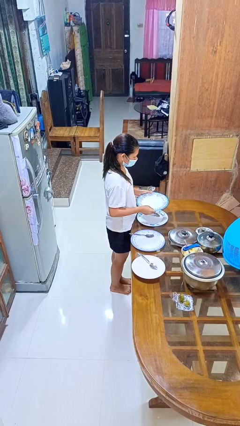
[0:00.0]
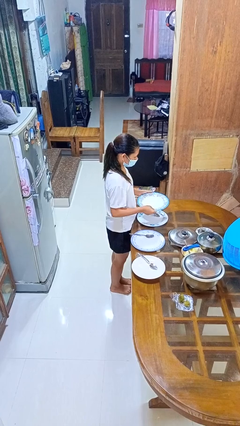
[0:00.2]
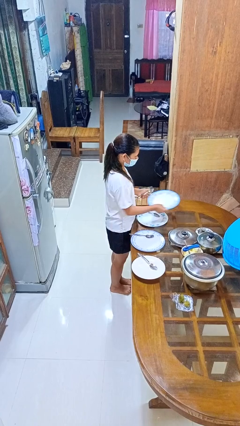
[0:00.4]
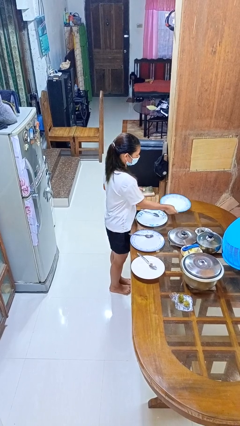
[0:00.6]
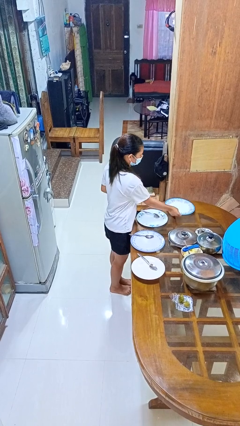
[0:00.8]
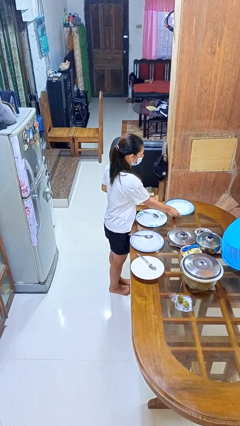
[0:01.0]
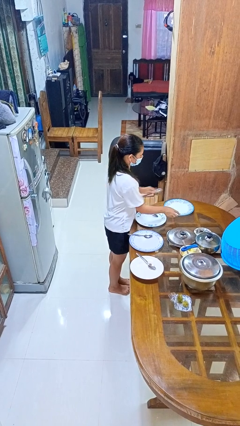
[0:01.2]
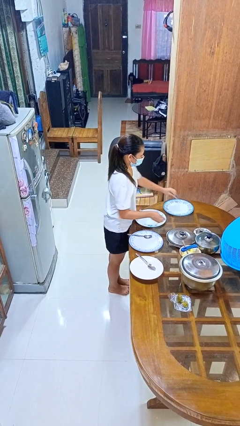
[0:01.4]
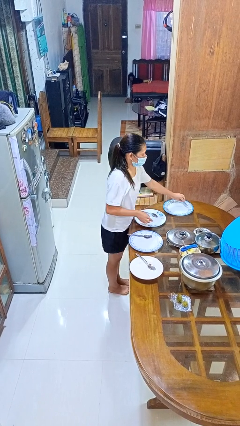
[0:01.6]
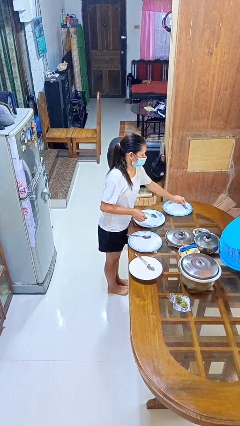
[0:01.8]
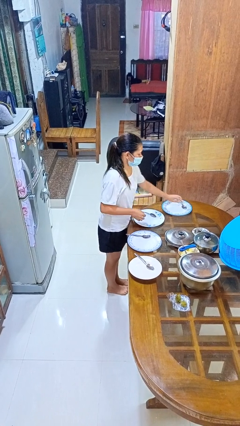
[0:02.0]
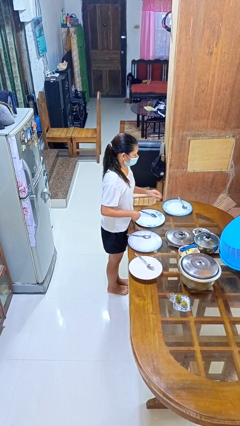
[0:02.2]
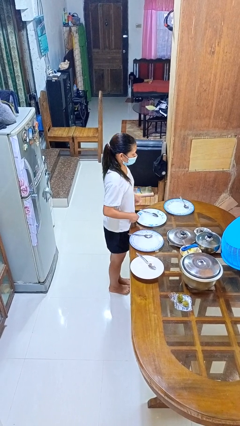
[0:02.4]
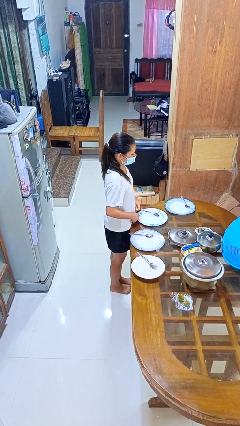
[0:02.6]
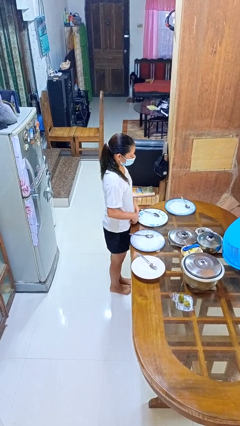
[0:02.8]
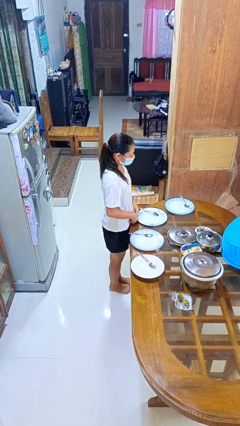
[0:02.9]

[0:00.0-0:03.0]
person sets table

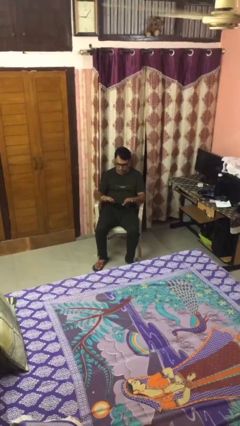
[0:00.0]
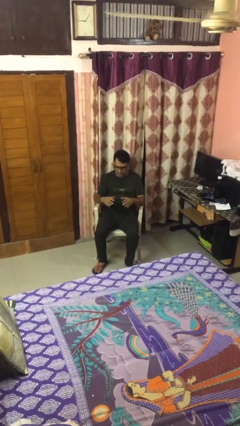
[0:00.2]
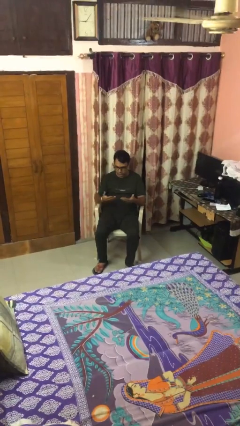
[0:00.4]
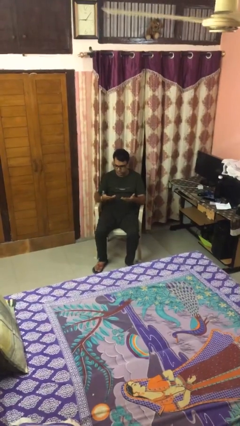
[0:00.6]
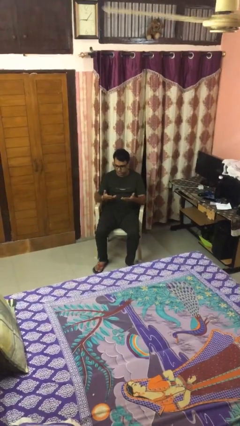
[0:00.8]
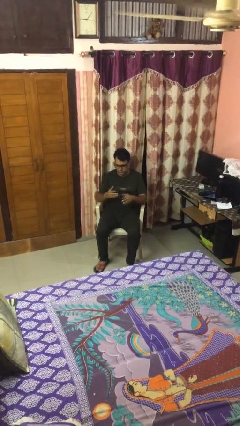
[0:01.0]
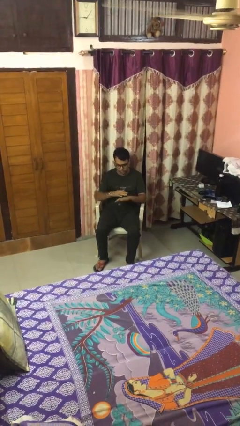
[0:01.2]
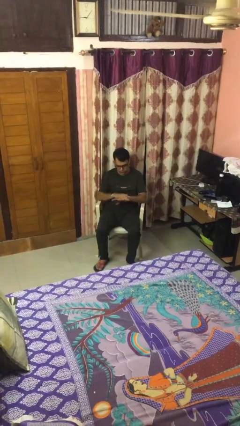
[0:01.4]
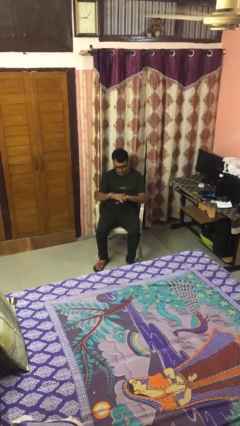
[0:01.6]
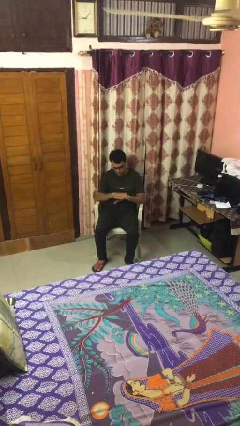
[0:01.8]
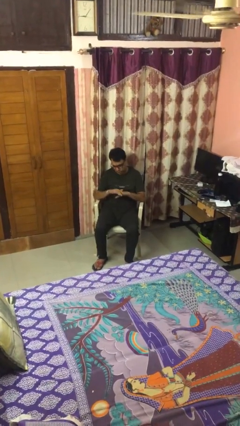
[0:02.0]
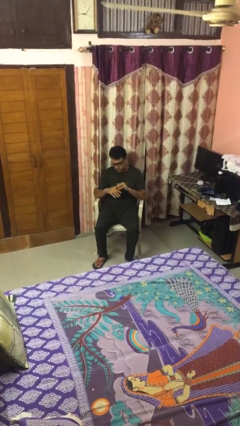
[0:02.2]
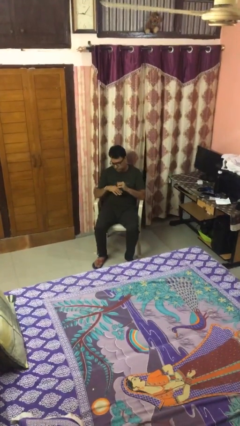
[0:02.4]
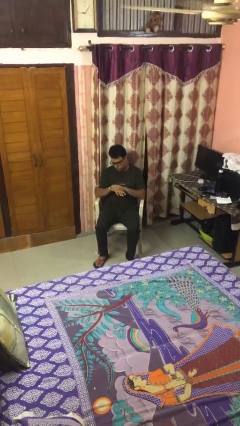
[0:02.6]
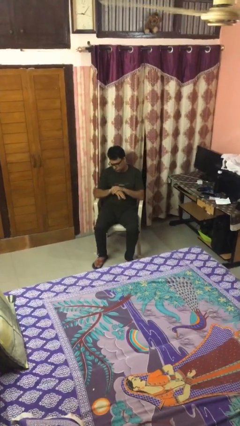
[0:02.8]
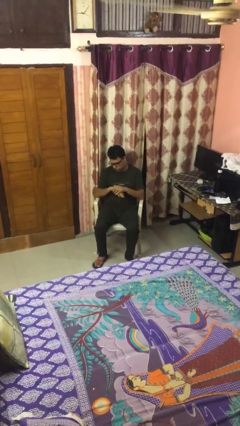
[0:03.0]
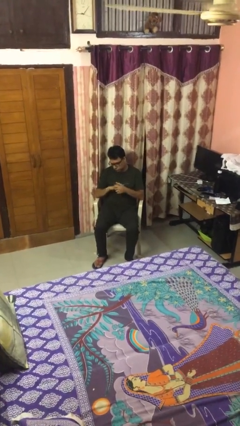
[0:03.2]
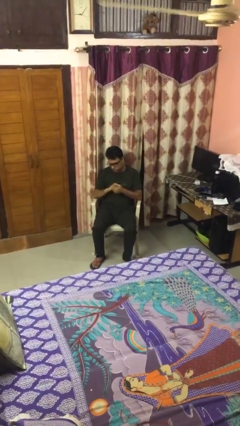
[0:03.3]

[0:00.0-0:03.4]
person looks at hands in lap

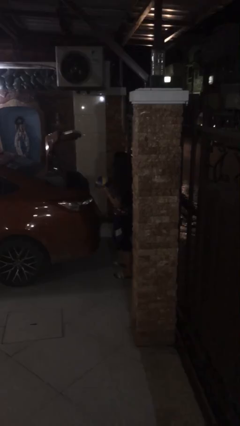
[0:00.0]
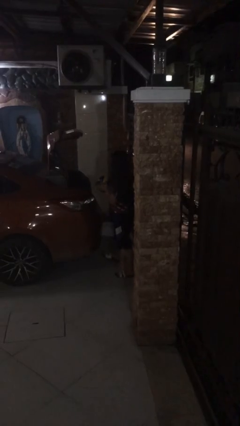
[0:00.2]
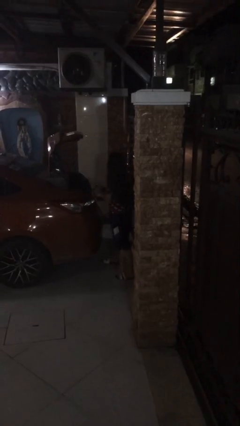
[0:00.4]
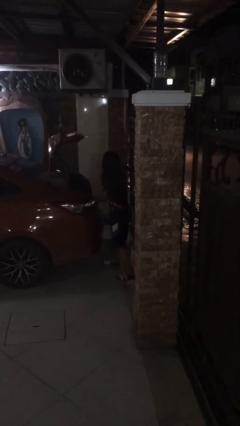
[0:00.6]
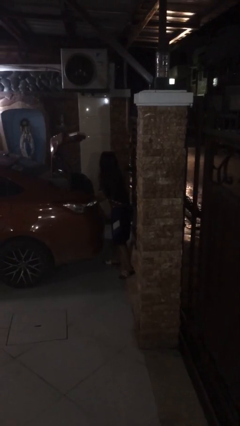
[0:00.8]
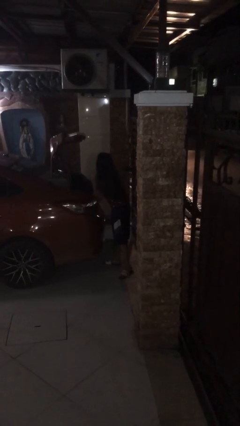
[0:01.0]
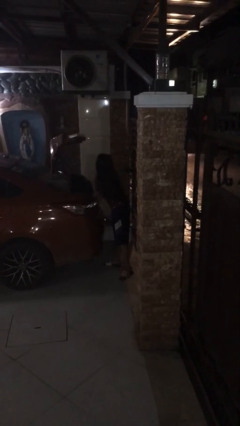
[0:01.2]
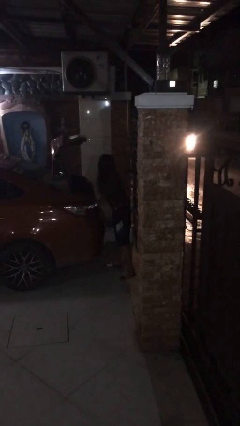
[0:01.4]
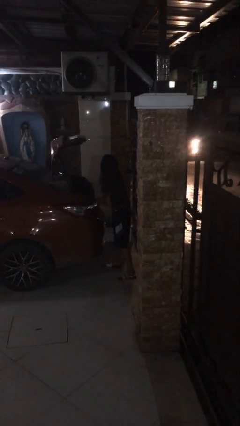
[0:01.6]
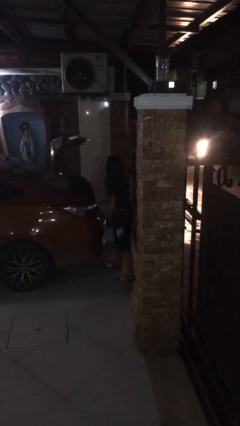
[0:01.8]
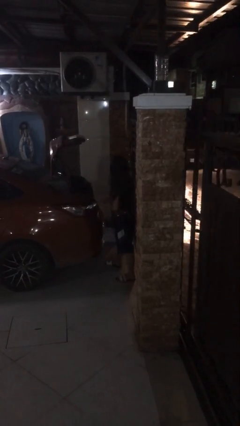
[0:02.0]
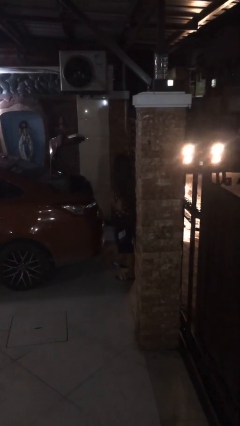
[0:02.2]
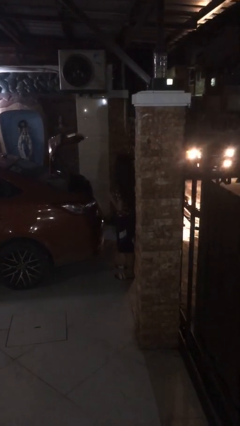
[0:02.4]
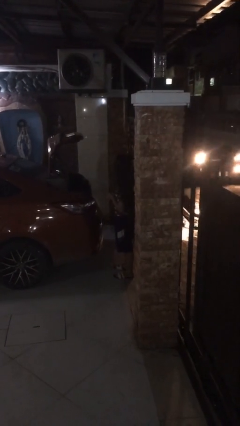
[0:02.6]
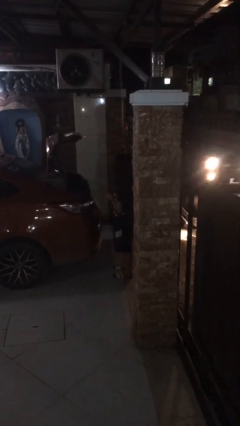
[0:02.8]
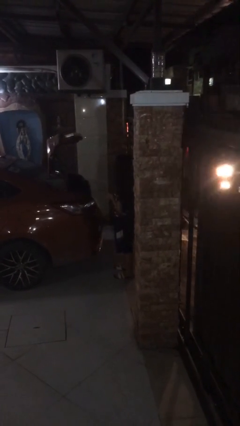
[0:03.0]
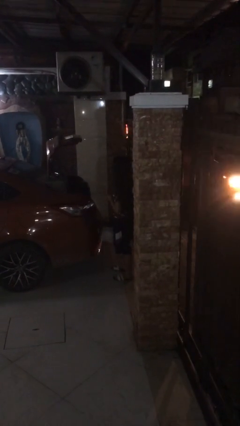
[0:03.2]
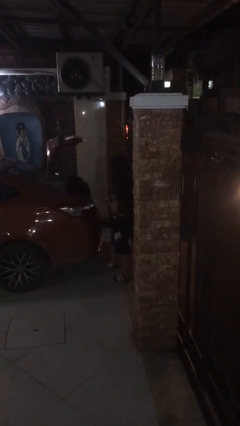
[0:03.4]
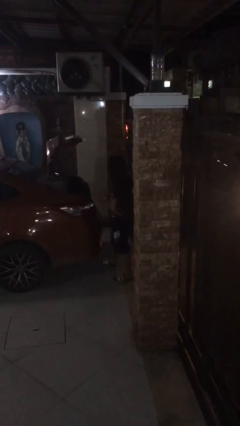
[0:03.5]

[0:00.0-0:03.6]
person loads car

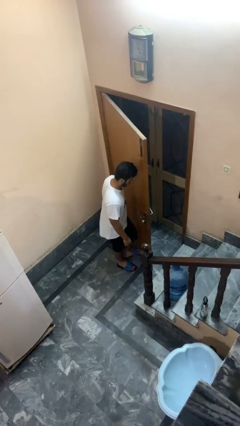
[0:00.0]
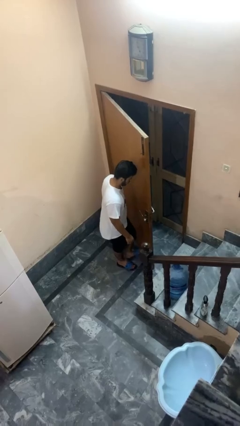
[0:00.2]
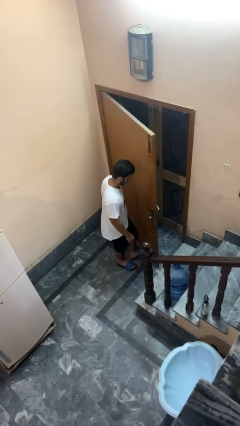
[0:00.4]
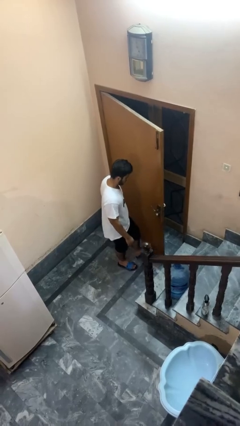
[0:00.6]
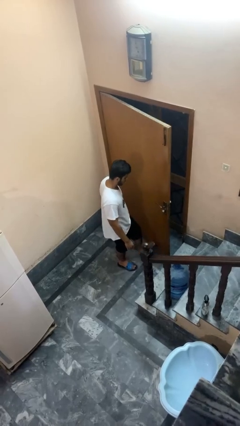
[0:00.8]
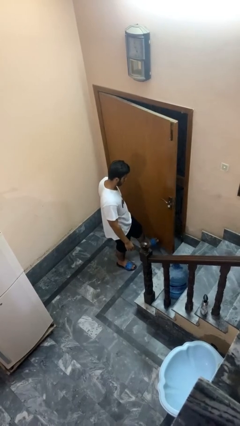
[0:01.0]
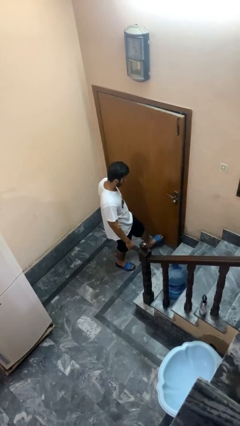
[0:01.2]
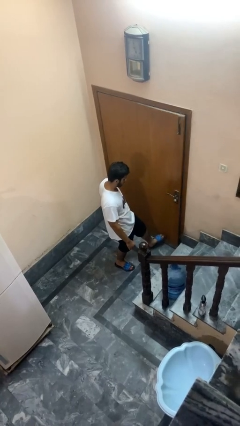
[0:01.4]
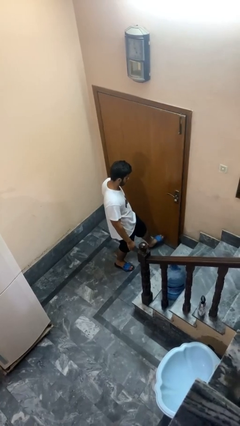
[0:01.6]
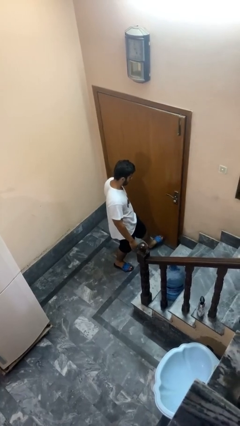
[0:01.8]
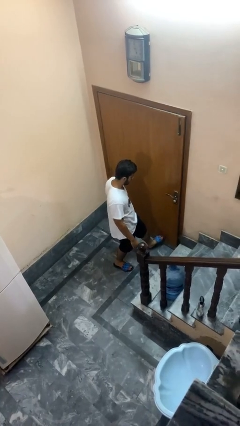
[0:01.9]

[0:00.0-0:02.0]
person closes door with foot

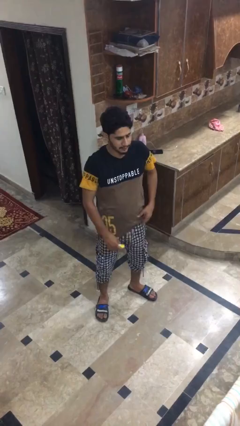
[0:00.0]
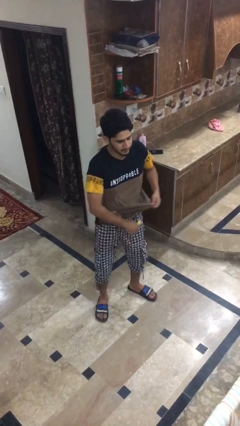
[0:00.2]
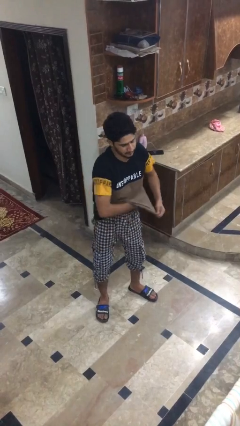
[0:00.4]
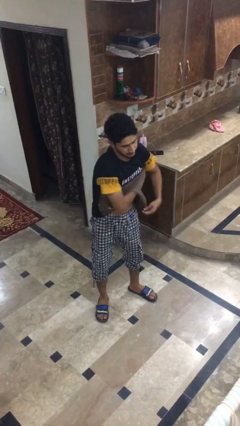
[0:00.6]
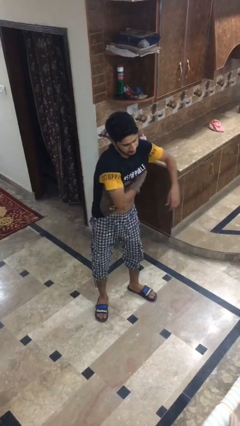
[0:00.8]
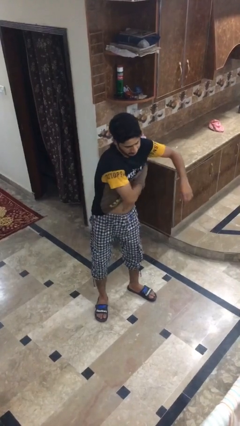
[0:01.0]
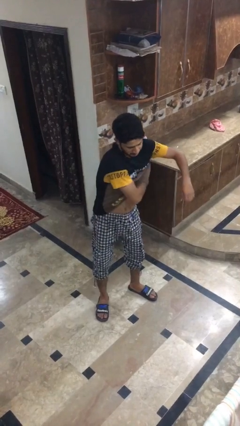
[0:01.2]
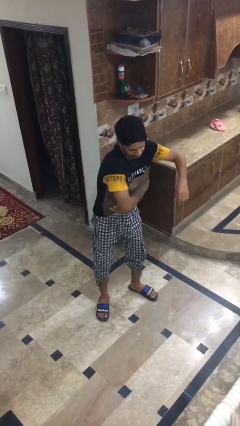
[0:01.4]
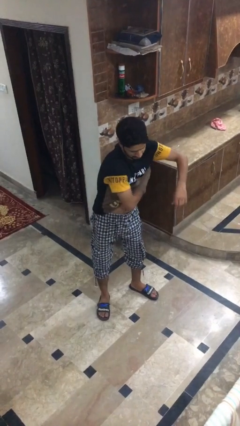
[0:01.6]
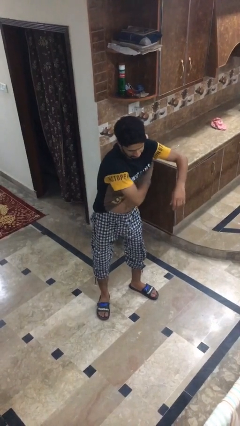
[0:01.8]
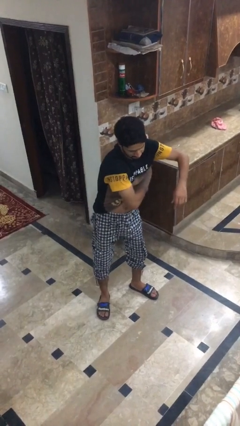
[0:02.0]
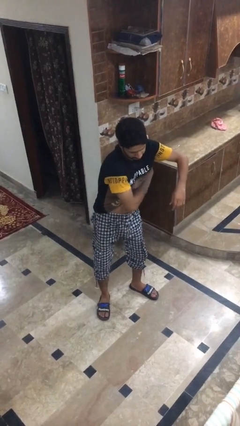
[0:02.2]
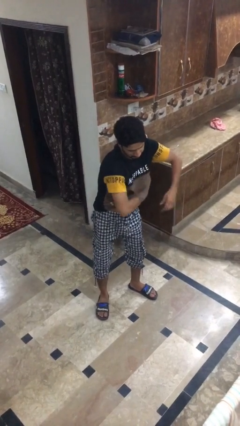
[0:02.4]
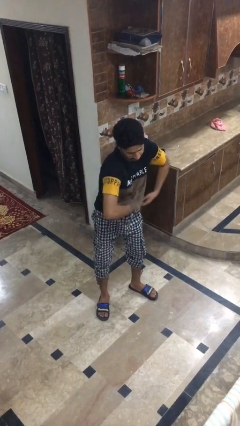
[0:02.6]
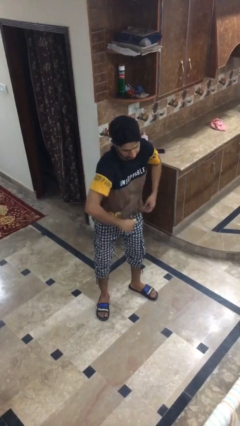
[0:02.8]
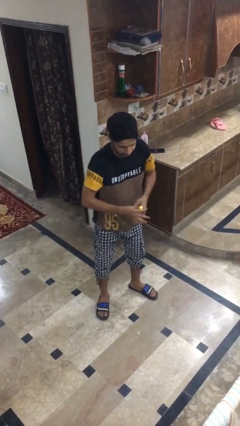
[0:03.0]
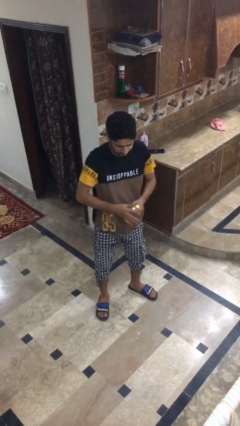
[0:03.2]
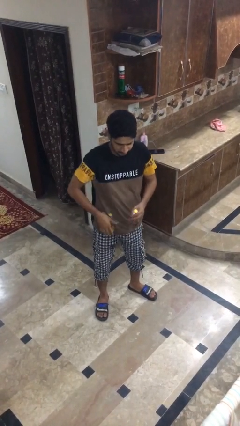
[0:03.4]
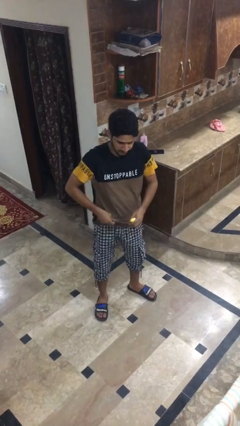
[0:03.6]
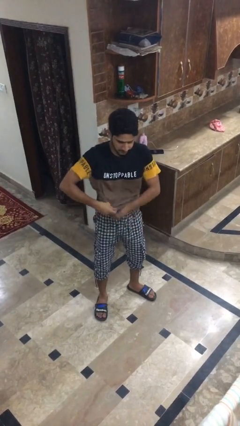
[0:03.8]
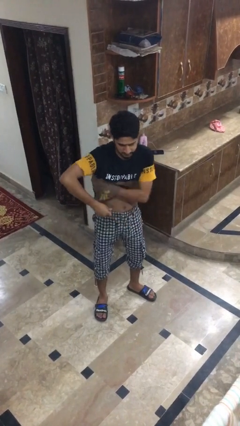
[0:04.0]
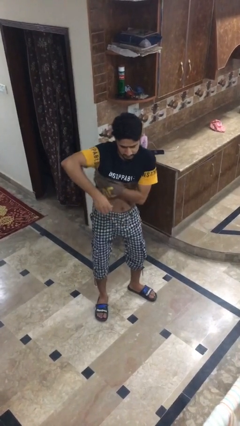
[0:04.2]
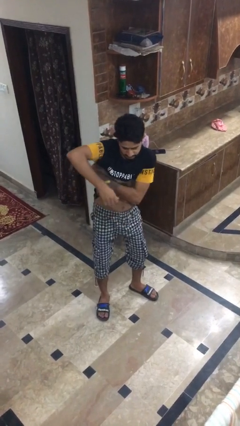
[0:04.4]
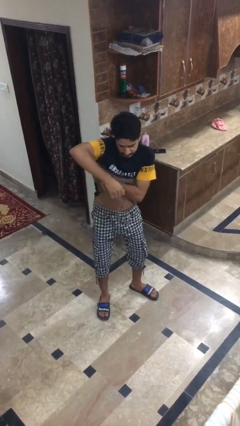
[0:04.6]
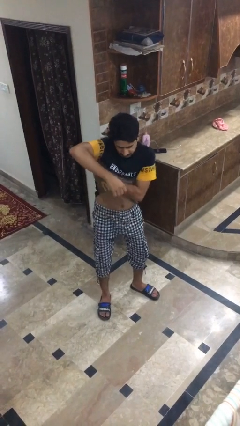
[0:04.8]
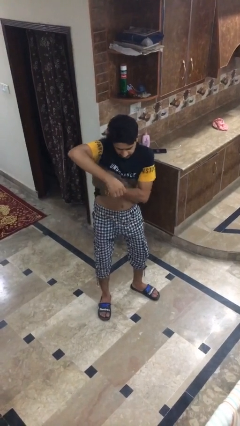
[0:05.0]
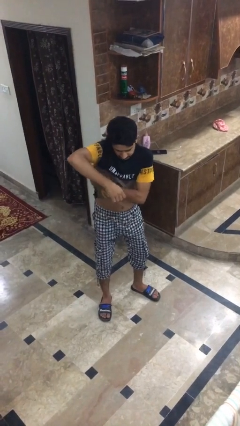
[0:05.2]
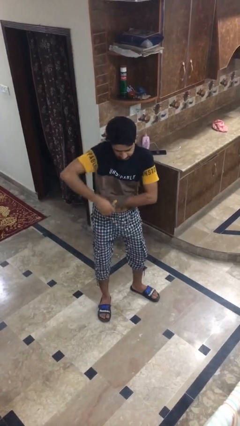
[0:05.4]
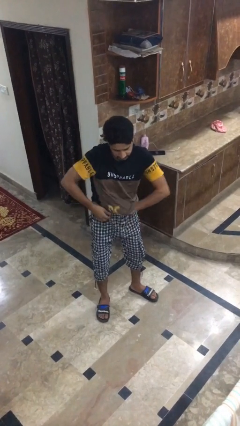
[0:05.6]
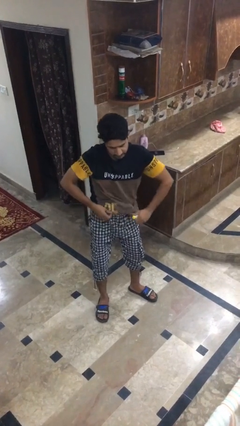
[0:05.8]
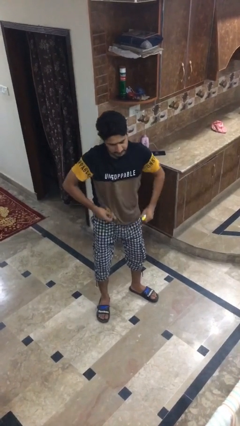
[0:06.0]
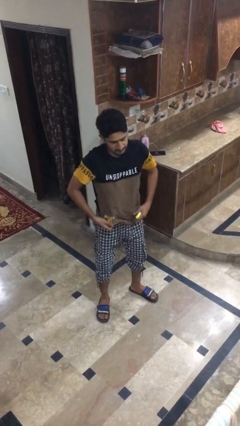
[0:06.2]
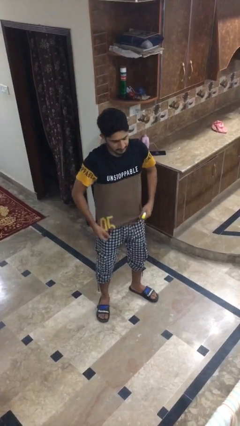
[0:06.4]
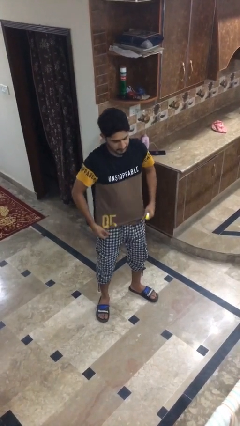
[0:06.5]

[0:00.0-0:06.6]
person applies deodorant
